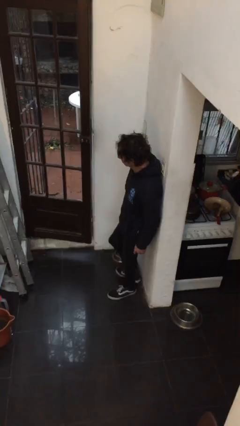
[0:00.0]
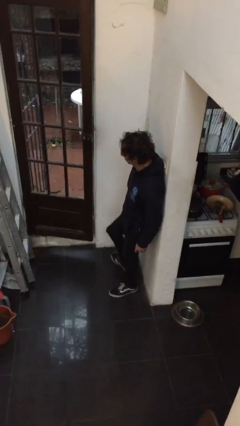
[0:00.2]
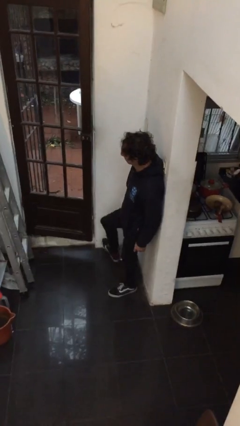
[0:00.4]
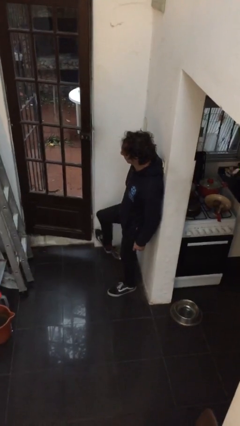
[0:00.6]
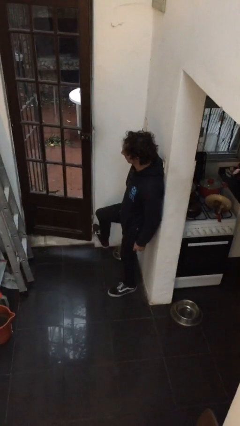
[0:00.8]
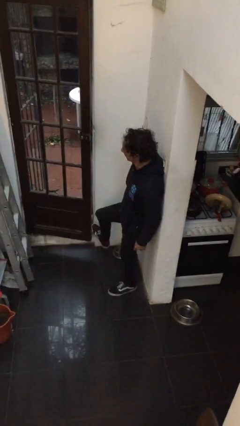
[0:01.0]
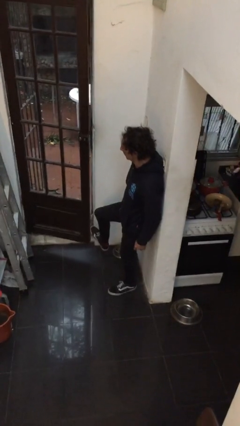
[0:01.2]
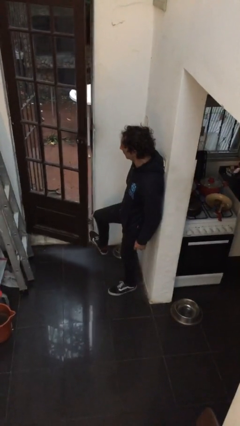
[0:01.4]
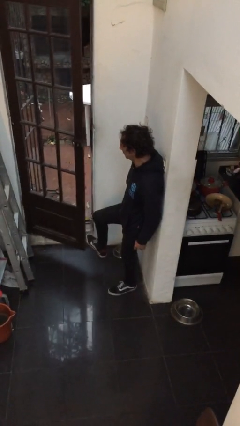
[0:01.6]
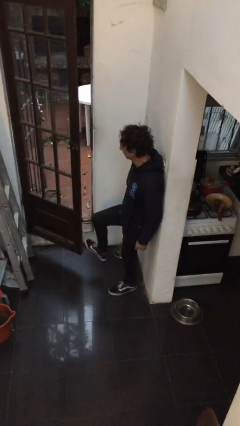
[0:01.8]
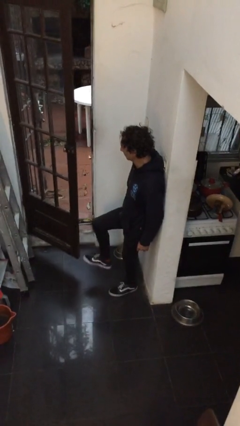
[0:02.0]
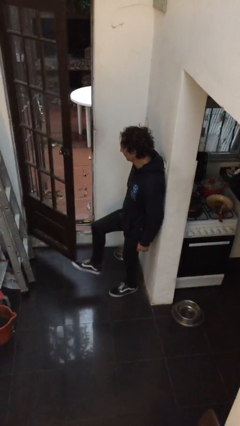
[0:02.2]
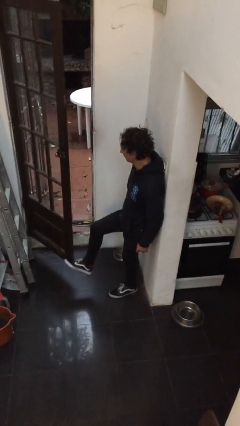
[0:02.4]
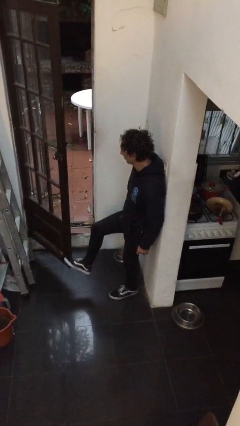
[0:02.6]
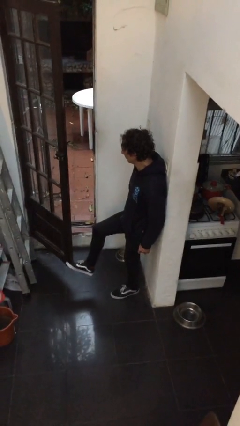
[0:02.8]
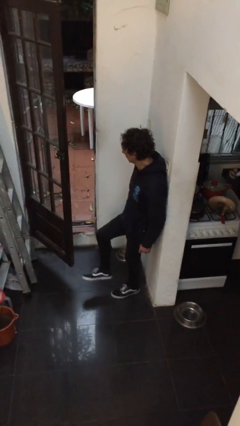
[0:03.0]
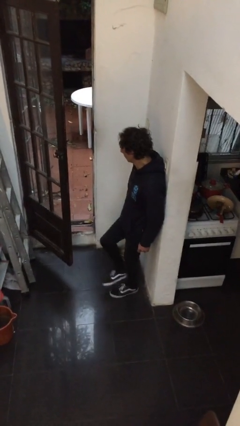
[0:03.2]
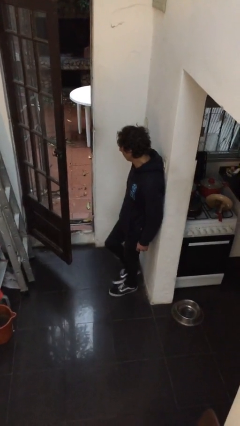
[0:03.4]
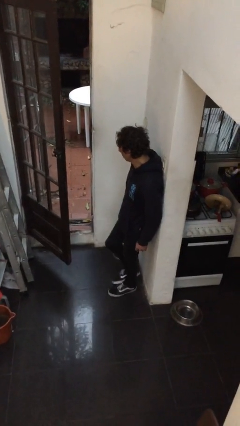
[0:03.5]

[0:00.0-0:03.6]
person opens facility door

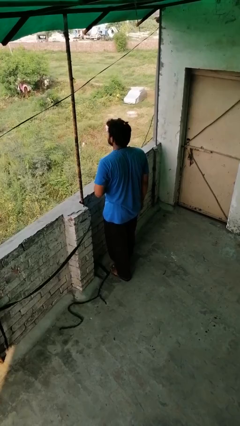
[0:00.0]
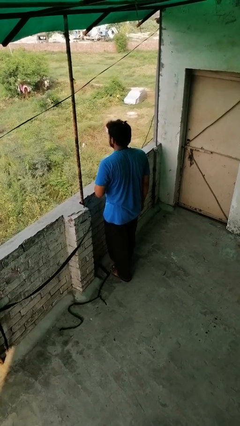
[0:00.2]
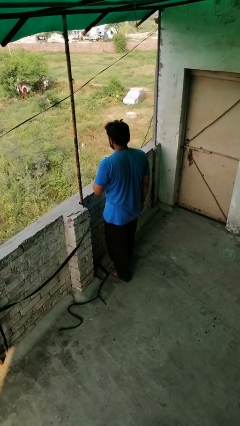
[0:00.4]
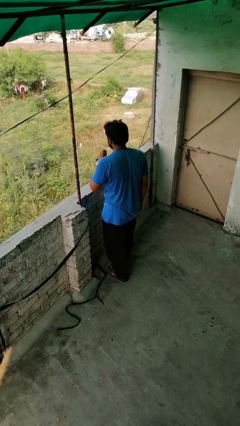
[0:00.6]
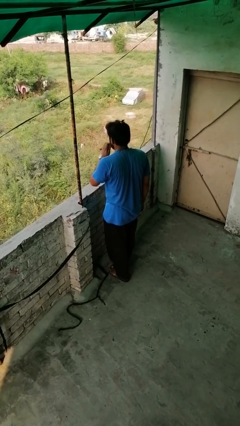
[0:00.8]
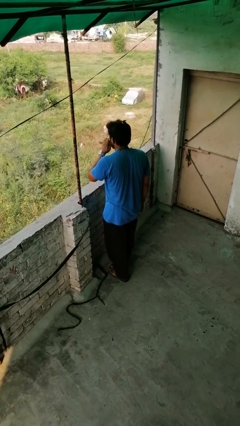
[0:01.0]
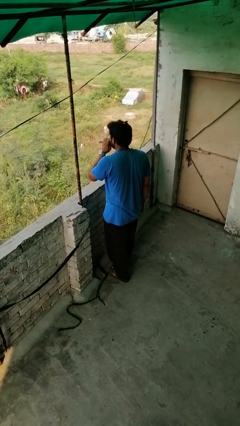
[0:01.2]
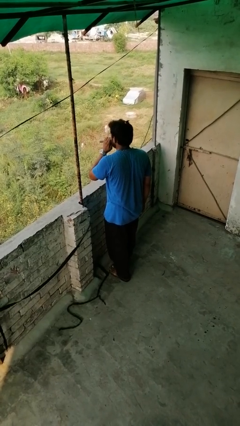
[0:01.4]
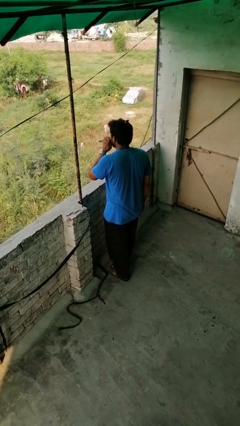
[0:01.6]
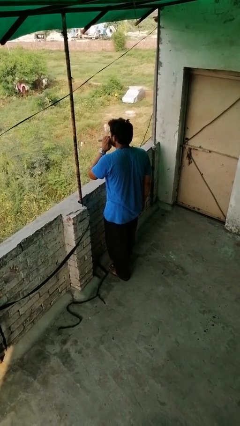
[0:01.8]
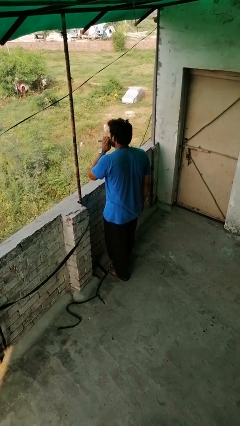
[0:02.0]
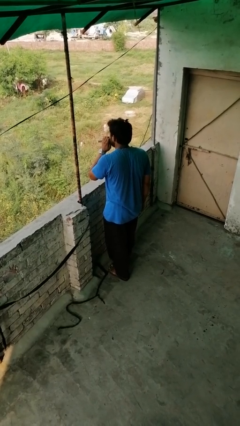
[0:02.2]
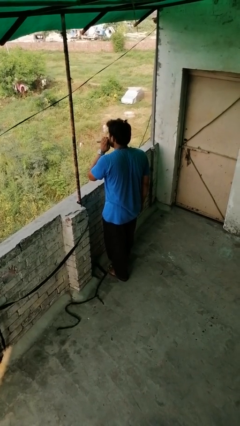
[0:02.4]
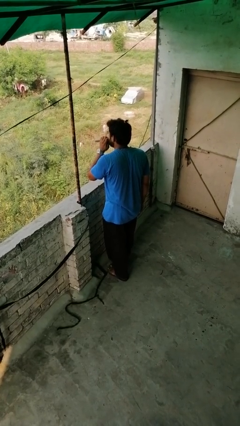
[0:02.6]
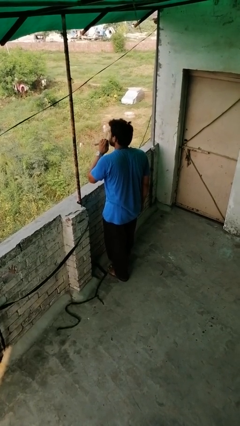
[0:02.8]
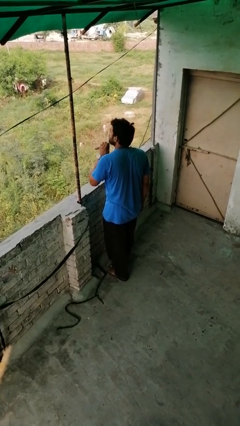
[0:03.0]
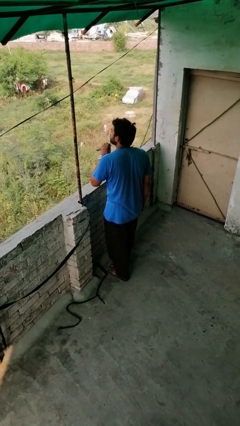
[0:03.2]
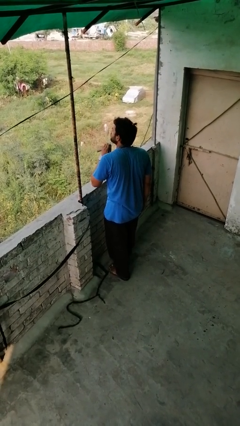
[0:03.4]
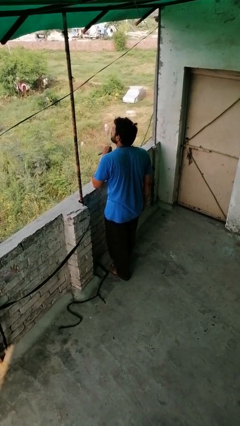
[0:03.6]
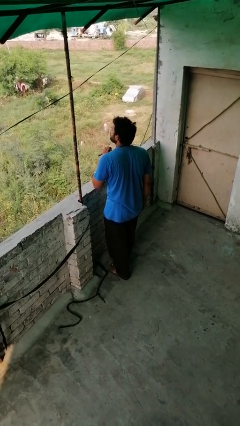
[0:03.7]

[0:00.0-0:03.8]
person vapes

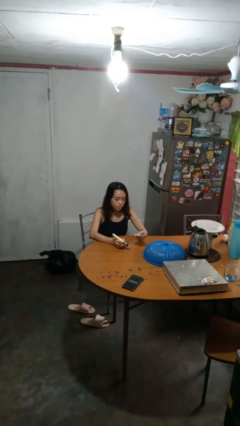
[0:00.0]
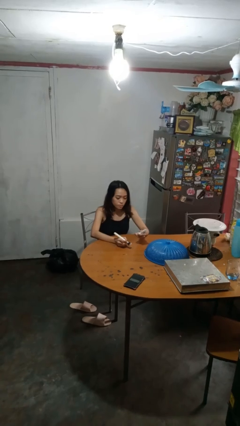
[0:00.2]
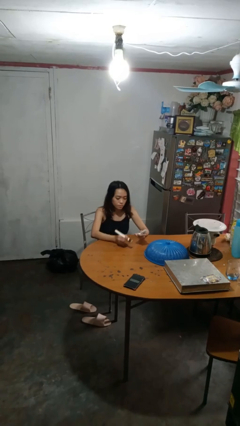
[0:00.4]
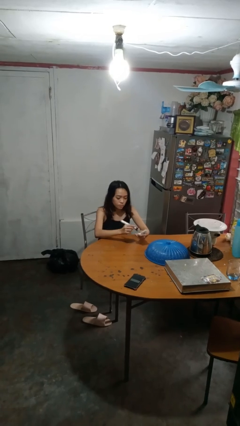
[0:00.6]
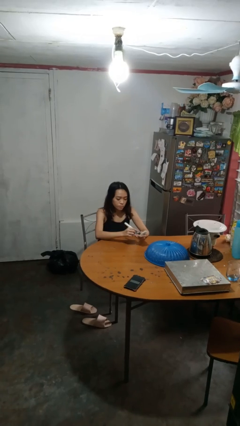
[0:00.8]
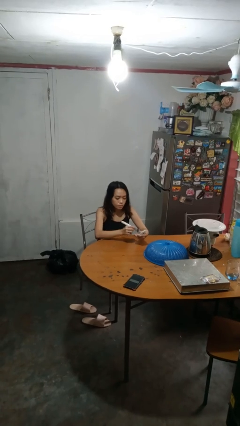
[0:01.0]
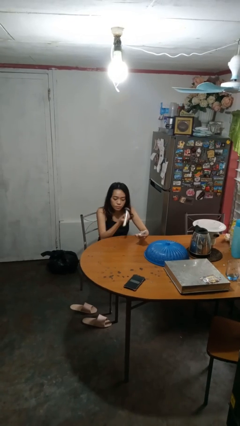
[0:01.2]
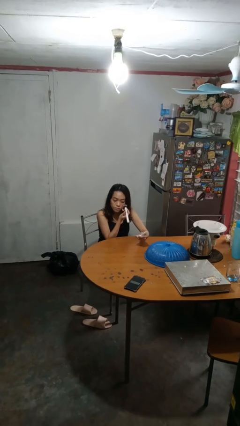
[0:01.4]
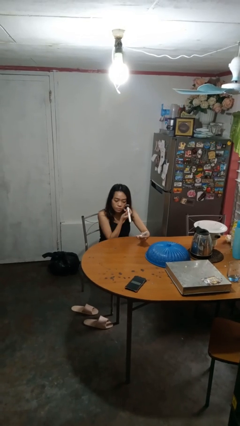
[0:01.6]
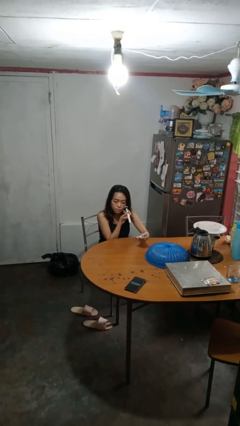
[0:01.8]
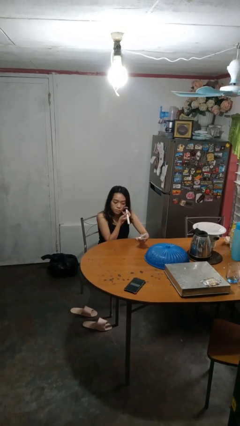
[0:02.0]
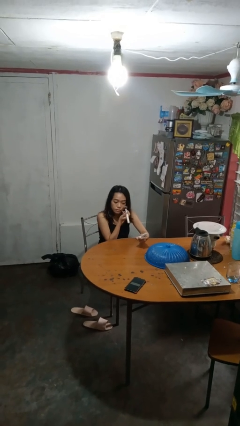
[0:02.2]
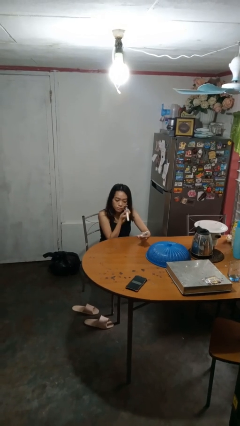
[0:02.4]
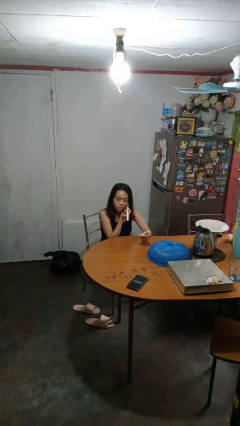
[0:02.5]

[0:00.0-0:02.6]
person applies foundation makeup

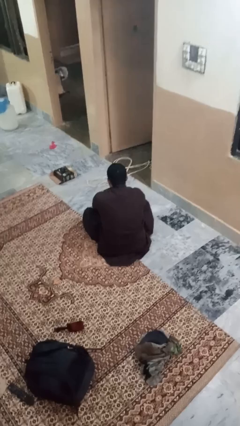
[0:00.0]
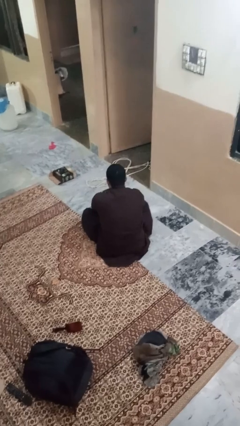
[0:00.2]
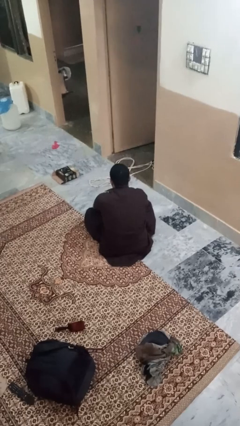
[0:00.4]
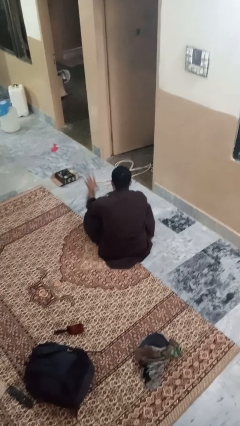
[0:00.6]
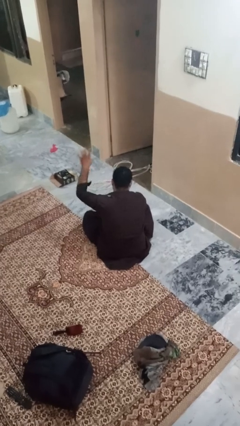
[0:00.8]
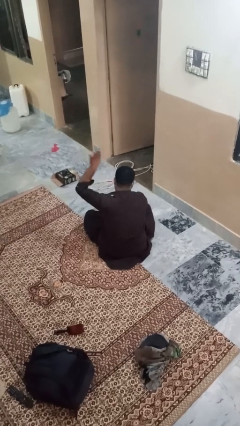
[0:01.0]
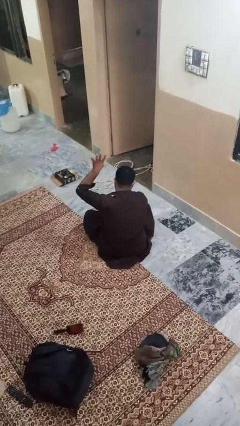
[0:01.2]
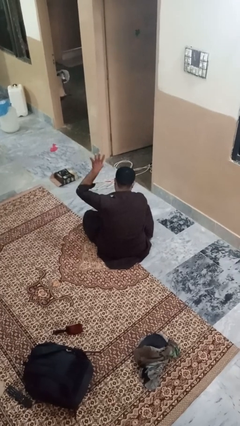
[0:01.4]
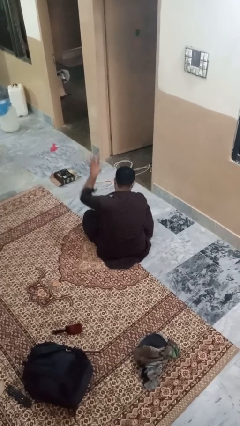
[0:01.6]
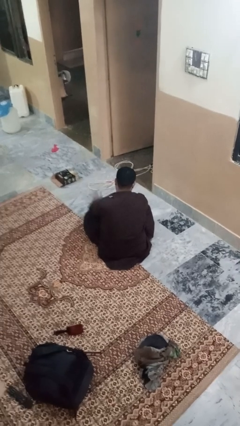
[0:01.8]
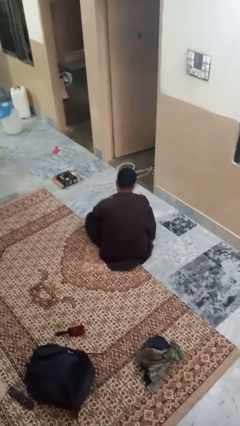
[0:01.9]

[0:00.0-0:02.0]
person gestures number four

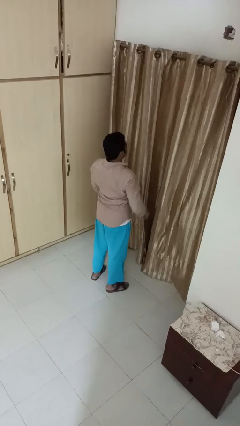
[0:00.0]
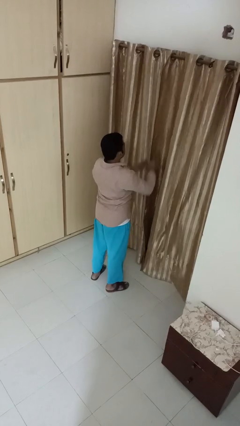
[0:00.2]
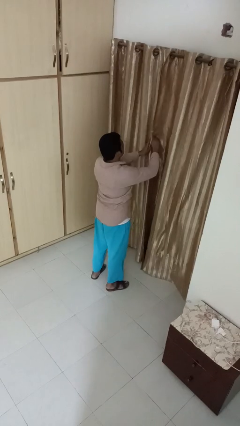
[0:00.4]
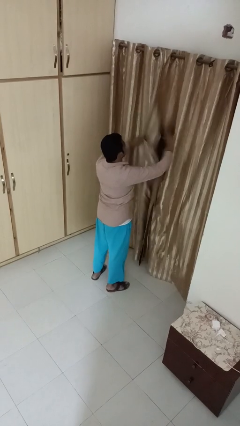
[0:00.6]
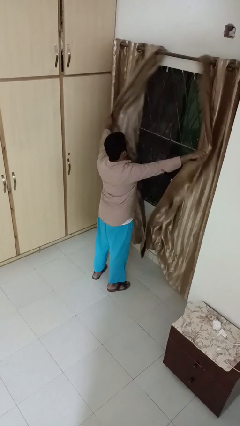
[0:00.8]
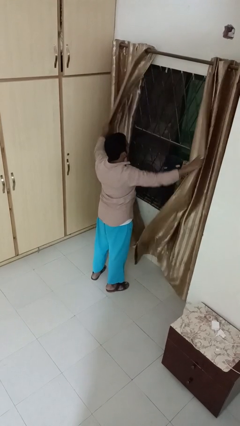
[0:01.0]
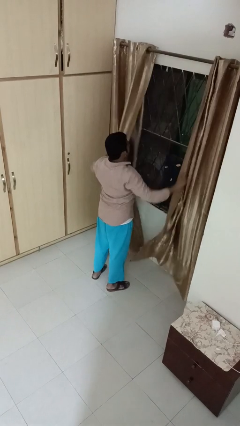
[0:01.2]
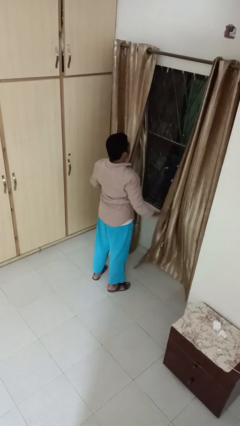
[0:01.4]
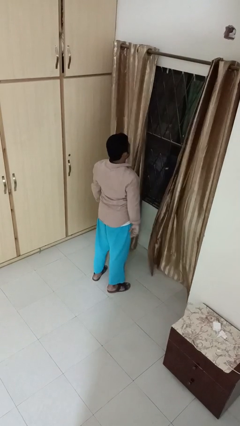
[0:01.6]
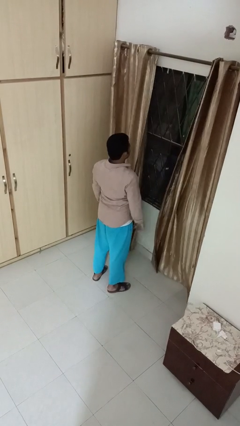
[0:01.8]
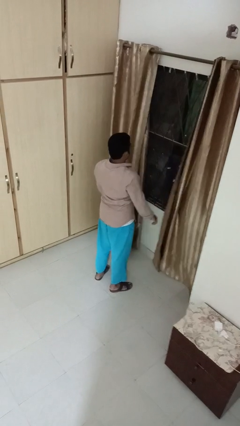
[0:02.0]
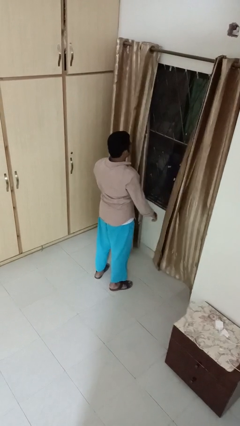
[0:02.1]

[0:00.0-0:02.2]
person opens curtains

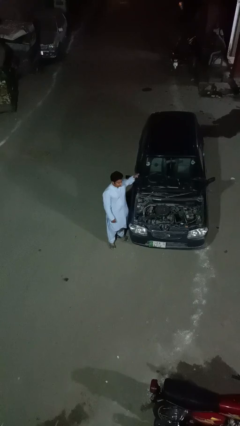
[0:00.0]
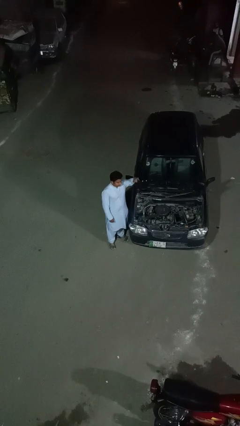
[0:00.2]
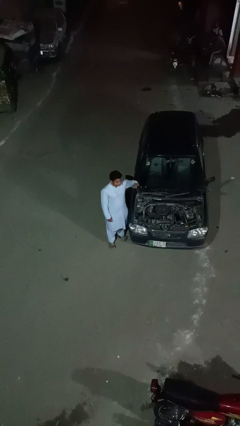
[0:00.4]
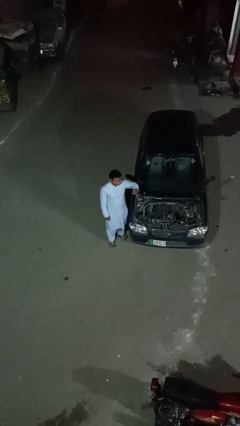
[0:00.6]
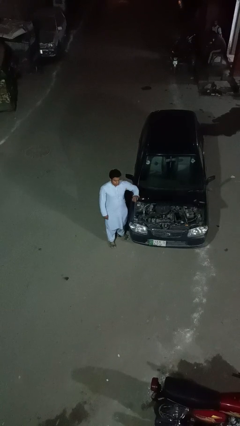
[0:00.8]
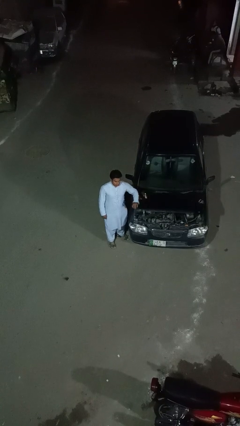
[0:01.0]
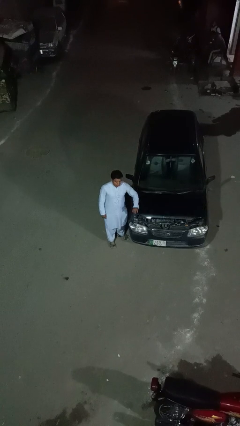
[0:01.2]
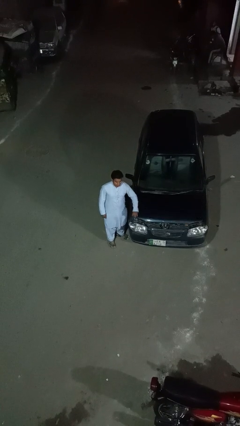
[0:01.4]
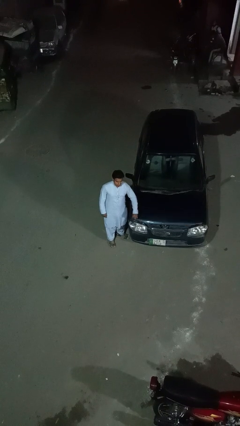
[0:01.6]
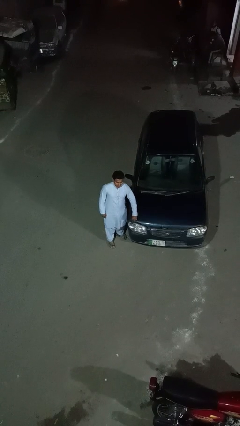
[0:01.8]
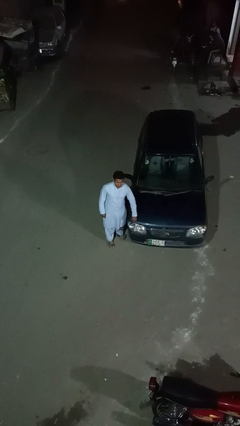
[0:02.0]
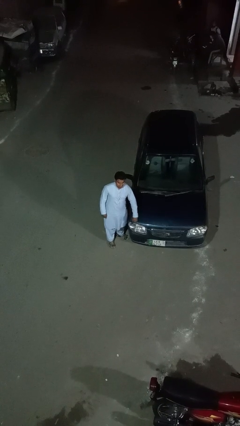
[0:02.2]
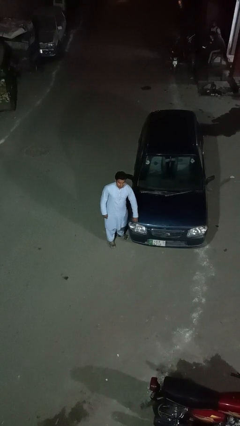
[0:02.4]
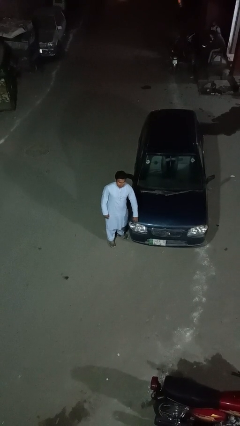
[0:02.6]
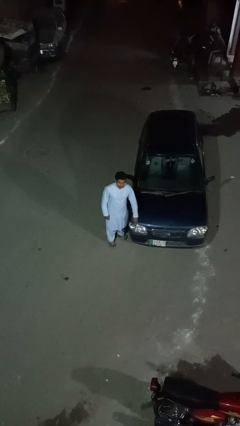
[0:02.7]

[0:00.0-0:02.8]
person closes car hood

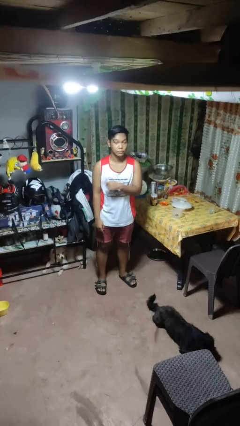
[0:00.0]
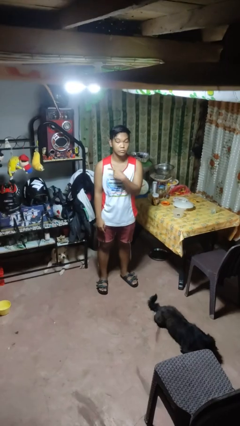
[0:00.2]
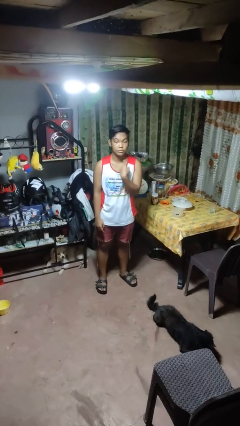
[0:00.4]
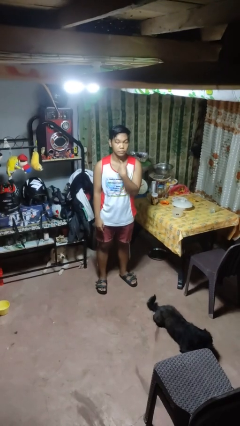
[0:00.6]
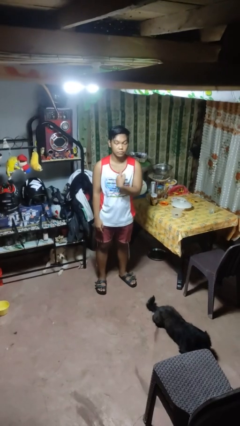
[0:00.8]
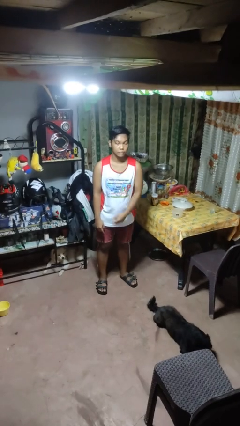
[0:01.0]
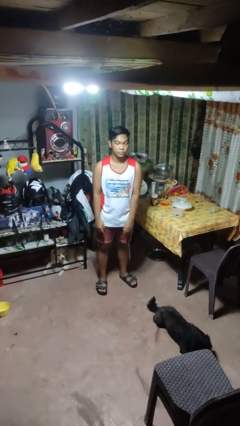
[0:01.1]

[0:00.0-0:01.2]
person gestures cut
